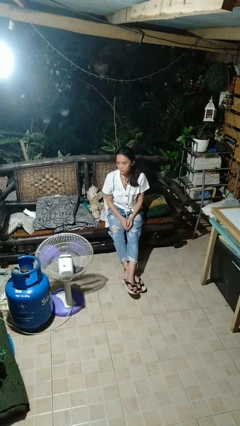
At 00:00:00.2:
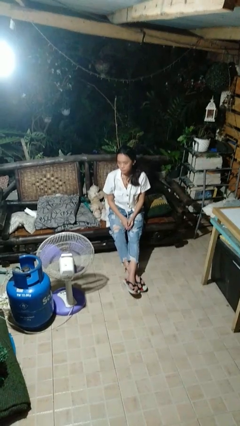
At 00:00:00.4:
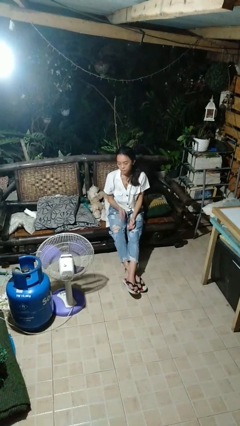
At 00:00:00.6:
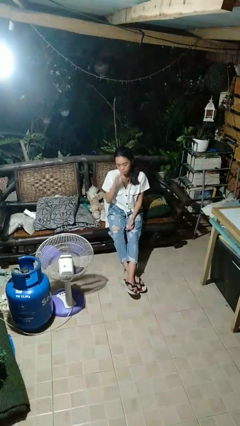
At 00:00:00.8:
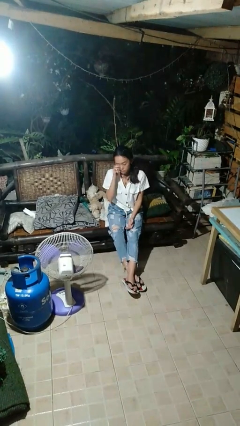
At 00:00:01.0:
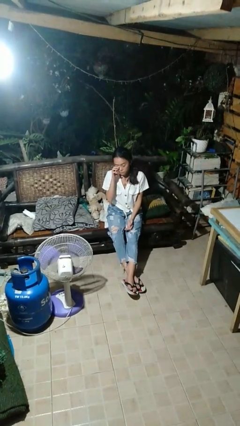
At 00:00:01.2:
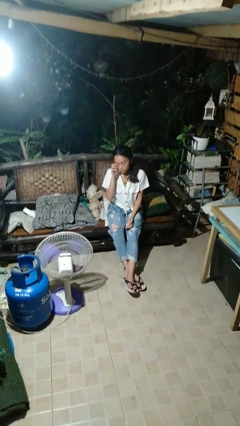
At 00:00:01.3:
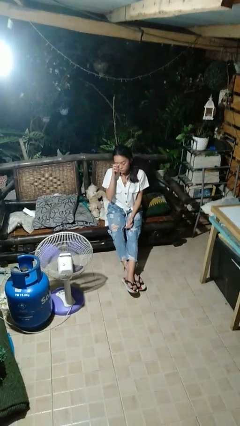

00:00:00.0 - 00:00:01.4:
person rubs eyes

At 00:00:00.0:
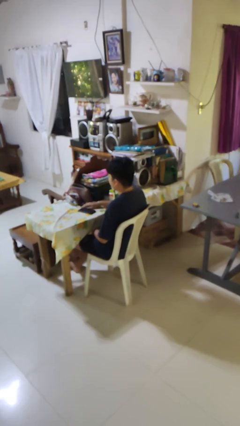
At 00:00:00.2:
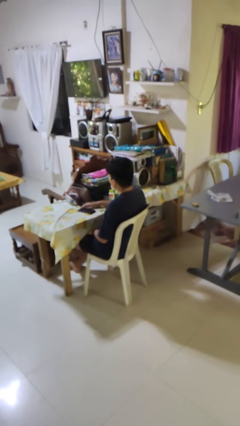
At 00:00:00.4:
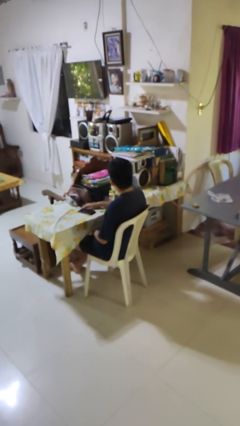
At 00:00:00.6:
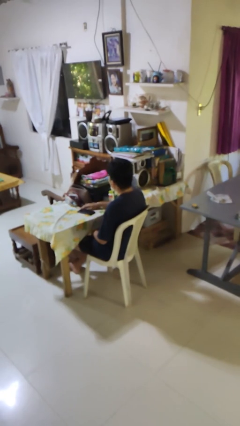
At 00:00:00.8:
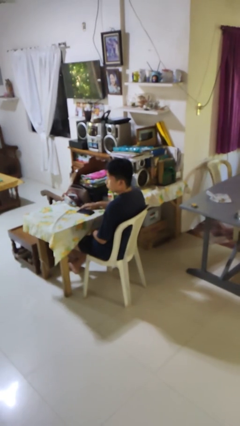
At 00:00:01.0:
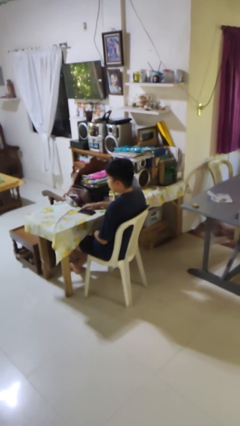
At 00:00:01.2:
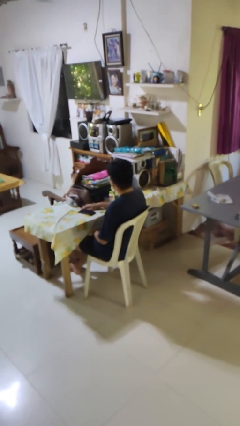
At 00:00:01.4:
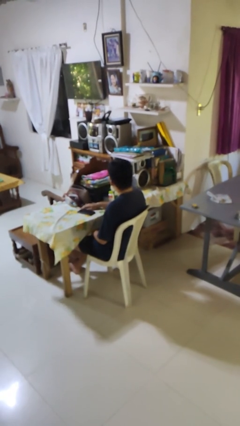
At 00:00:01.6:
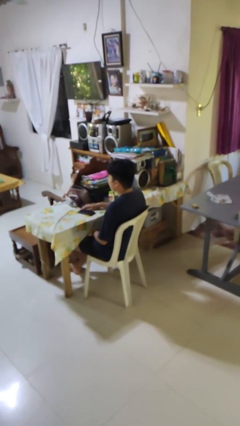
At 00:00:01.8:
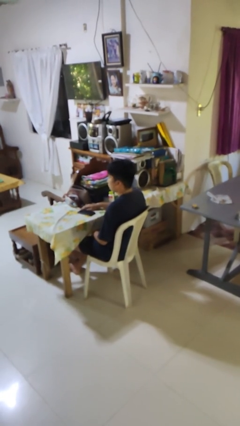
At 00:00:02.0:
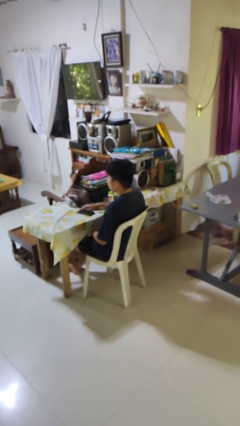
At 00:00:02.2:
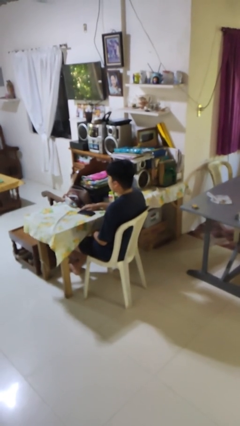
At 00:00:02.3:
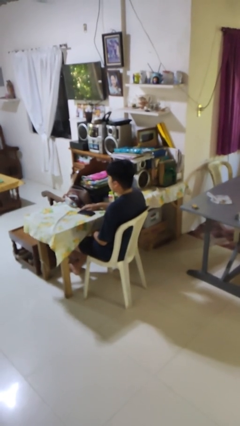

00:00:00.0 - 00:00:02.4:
person shakes head

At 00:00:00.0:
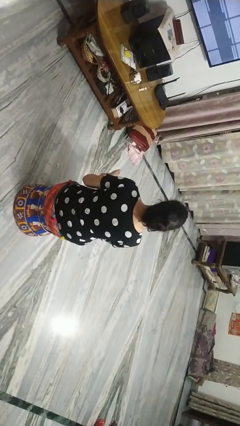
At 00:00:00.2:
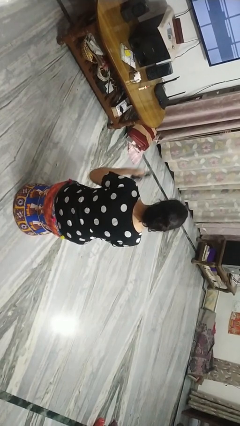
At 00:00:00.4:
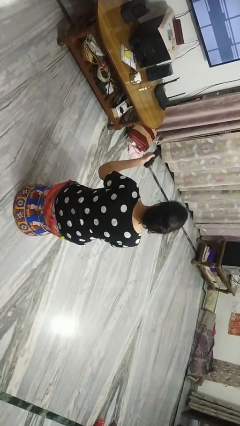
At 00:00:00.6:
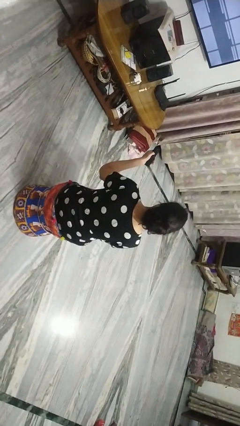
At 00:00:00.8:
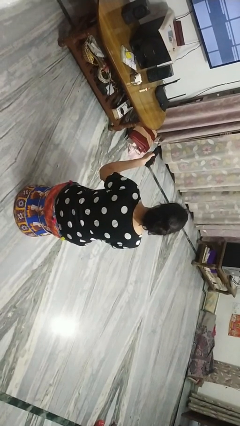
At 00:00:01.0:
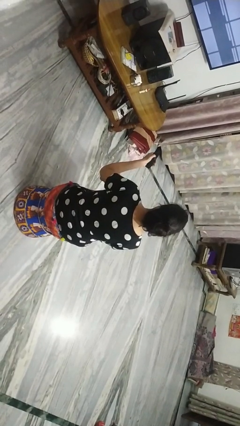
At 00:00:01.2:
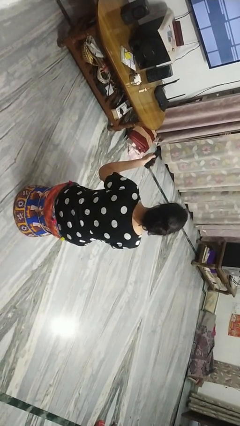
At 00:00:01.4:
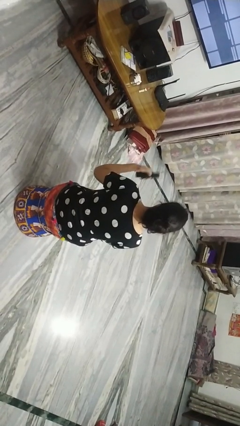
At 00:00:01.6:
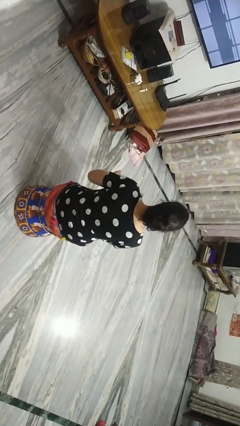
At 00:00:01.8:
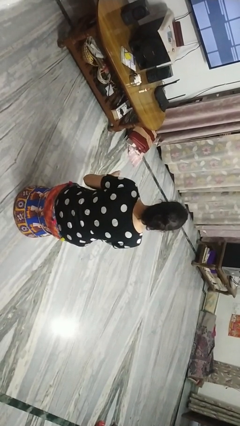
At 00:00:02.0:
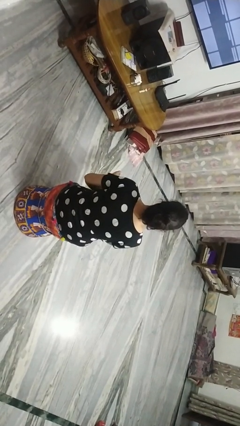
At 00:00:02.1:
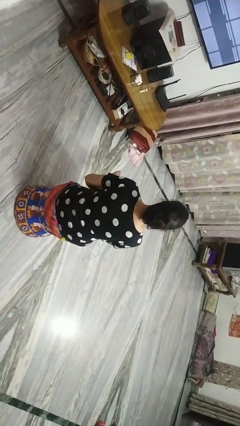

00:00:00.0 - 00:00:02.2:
person uses television remote

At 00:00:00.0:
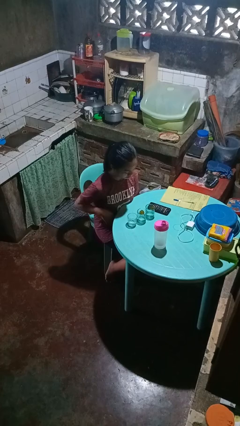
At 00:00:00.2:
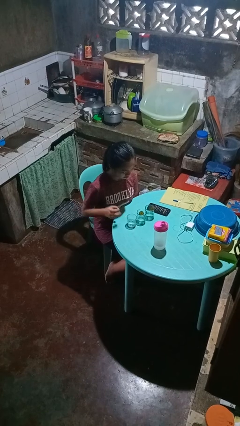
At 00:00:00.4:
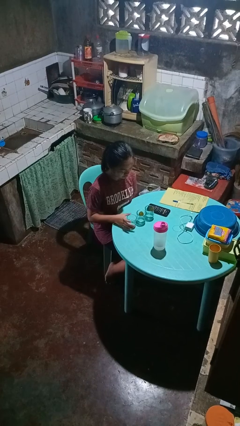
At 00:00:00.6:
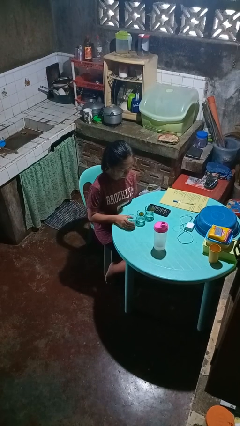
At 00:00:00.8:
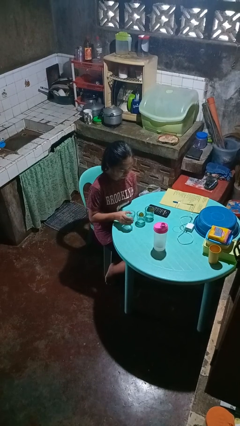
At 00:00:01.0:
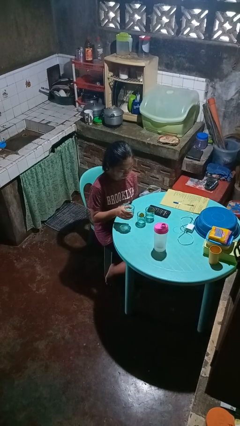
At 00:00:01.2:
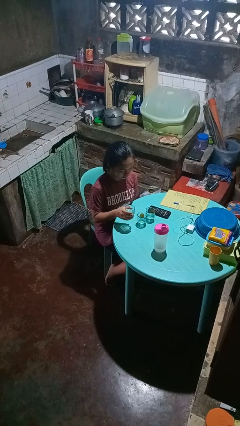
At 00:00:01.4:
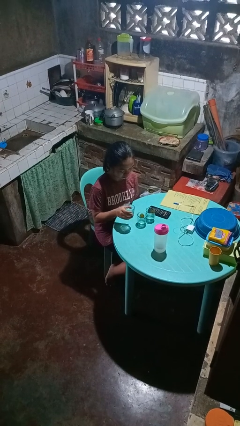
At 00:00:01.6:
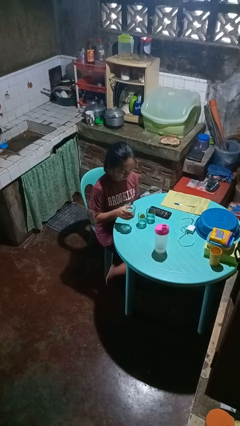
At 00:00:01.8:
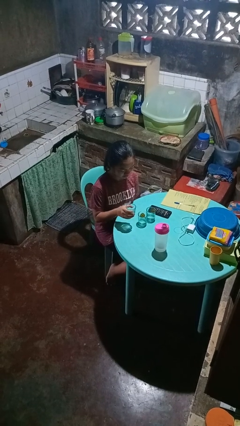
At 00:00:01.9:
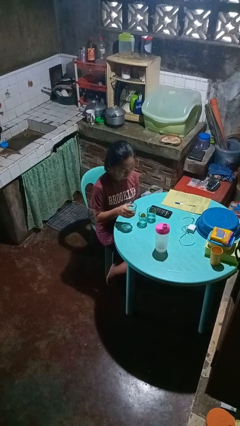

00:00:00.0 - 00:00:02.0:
person picks up object from table

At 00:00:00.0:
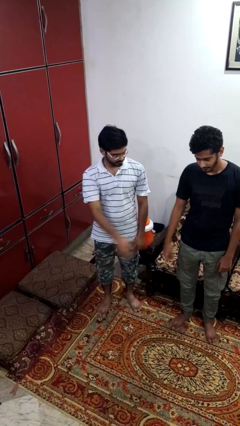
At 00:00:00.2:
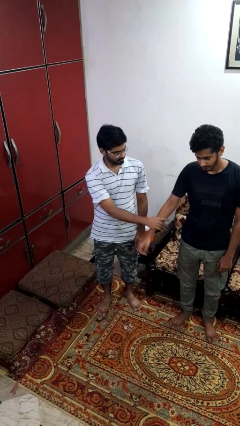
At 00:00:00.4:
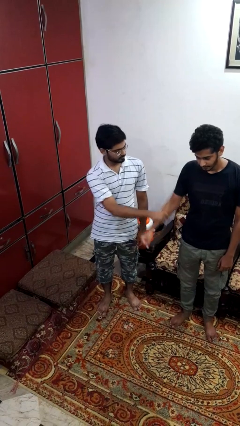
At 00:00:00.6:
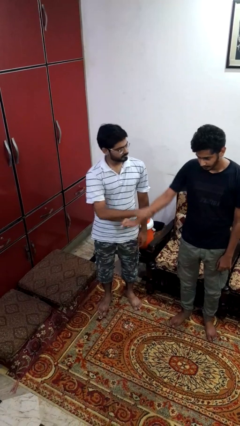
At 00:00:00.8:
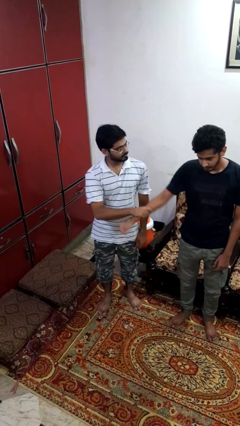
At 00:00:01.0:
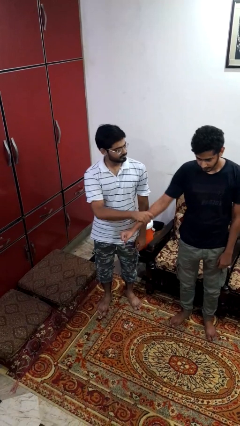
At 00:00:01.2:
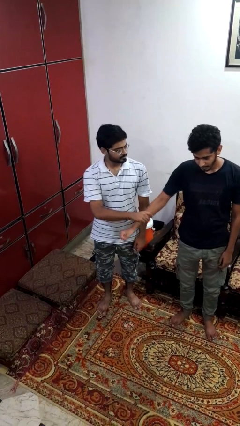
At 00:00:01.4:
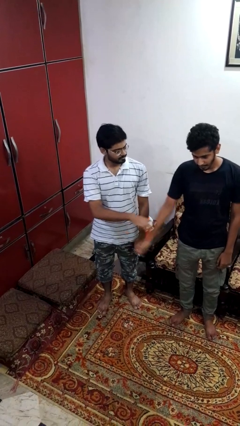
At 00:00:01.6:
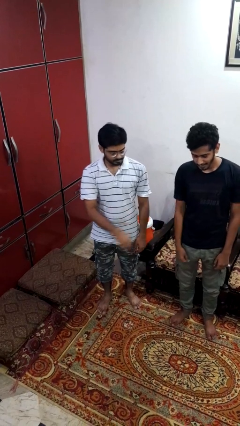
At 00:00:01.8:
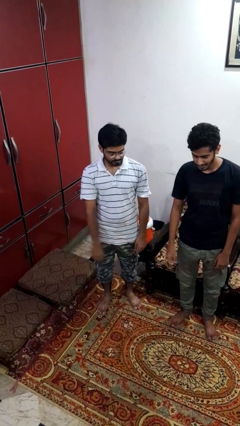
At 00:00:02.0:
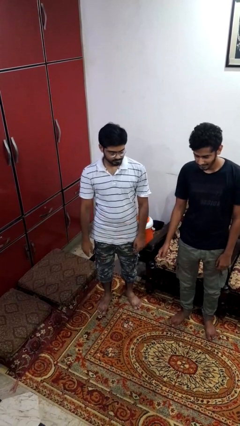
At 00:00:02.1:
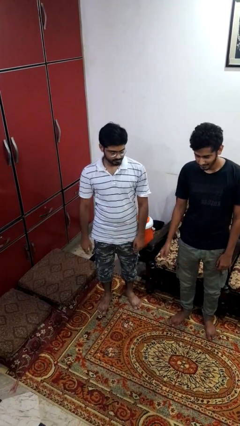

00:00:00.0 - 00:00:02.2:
person grabs person by forearm

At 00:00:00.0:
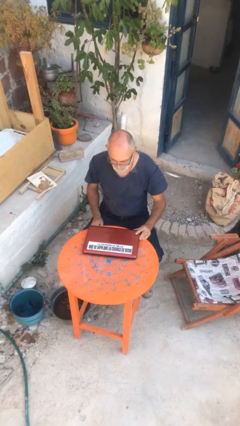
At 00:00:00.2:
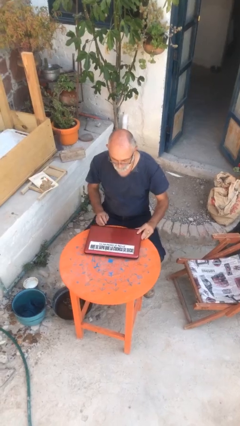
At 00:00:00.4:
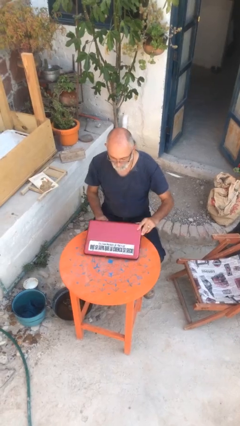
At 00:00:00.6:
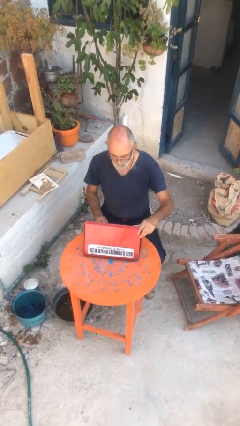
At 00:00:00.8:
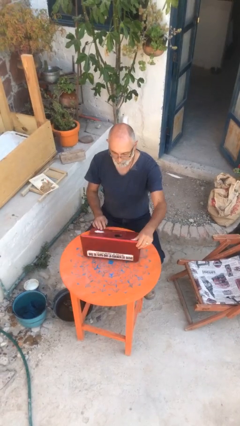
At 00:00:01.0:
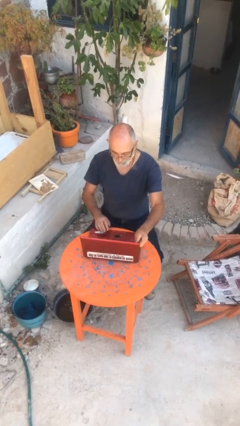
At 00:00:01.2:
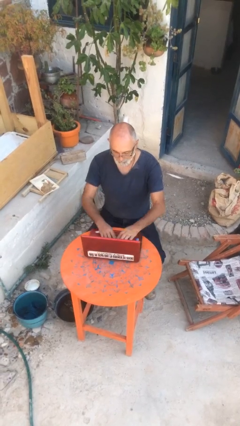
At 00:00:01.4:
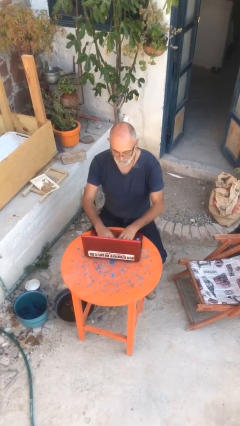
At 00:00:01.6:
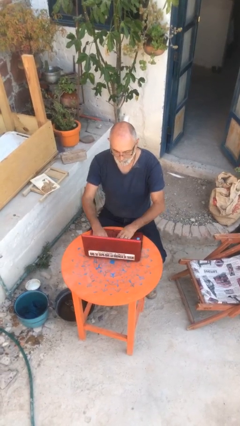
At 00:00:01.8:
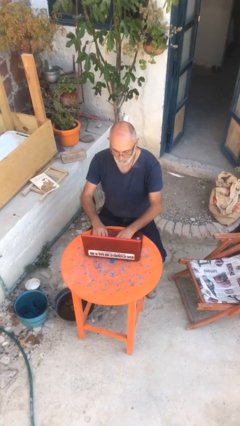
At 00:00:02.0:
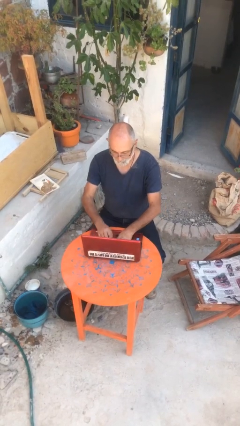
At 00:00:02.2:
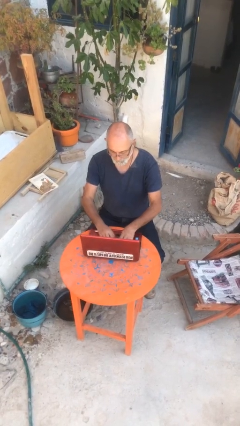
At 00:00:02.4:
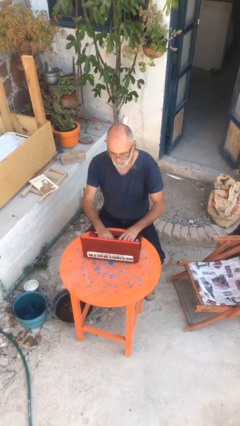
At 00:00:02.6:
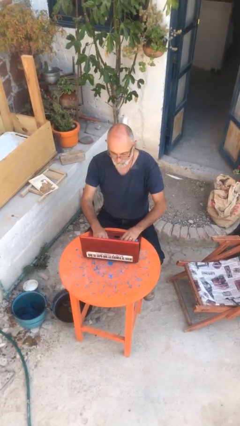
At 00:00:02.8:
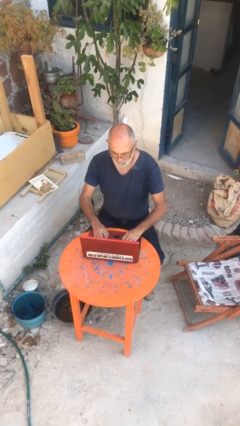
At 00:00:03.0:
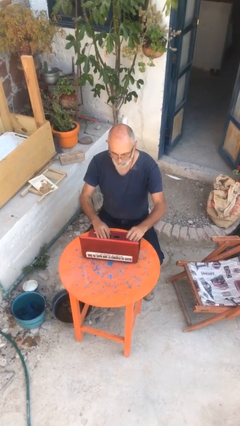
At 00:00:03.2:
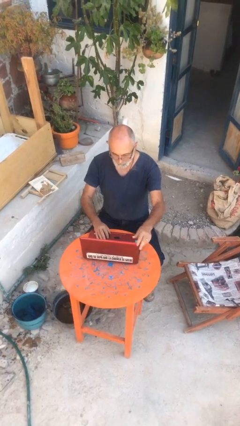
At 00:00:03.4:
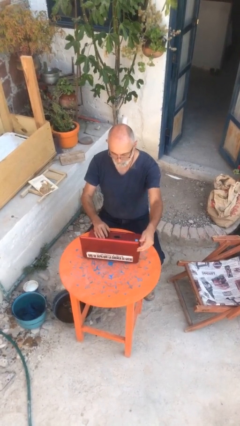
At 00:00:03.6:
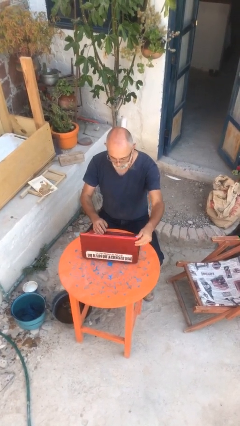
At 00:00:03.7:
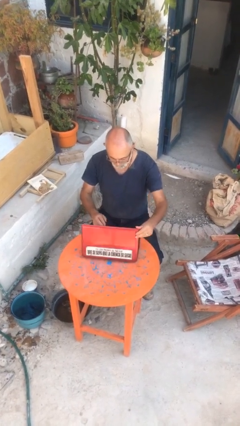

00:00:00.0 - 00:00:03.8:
person interacts with laptop

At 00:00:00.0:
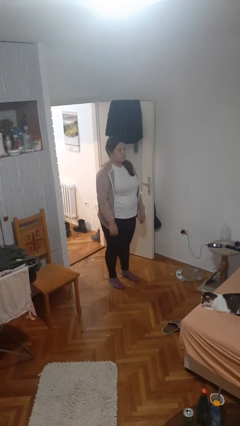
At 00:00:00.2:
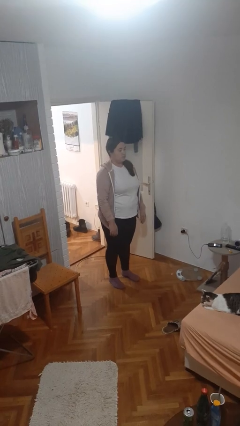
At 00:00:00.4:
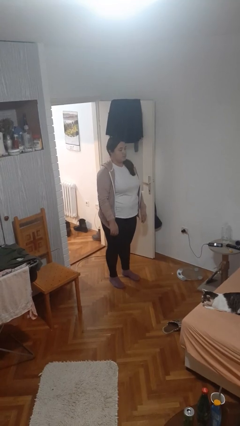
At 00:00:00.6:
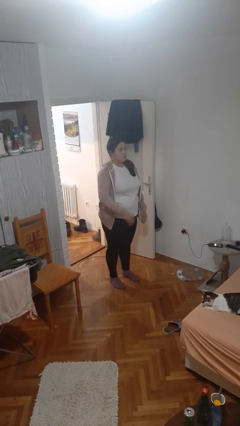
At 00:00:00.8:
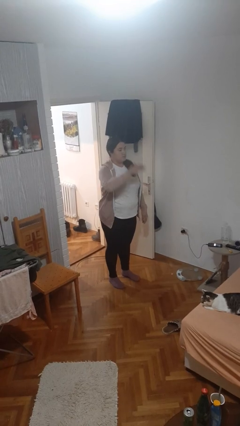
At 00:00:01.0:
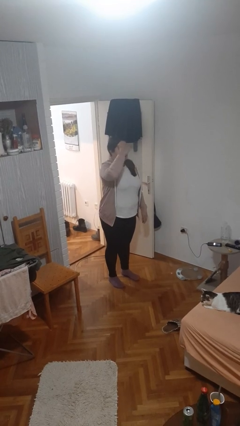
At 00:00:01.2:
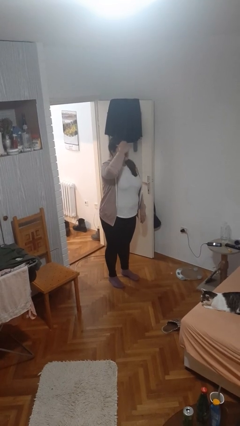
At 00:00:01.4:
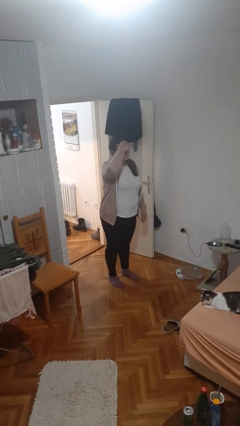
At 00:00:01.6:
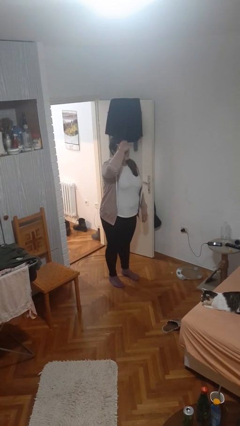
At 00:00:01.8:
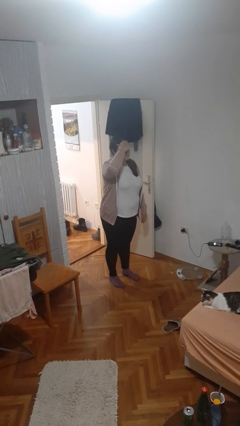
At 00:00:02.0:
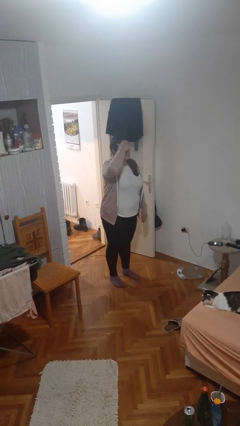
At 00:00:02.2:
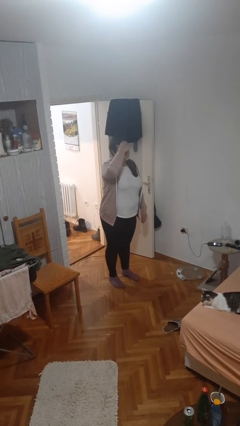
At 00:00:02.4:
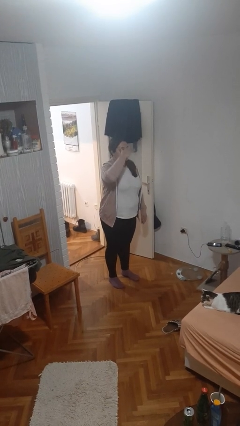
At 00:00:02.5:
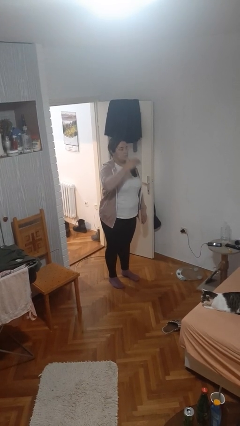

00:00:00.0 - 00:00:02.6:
person shades eyes
